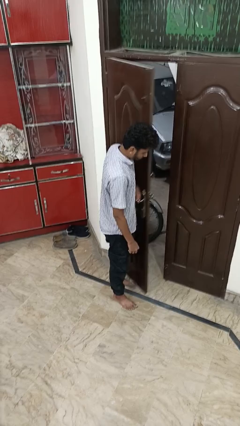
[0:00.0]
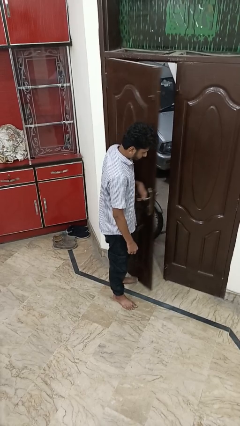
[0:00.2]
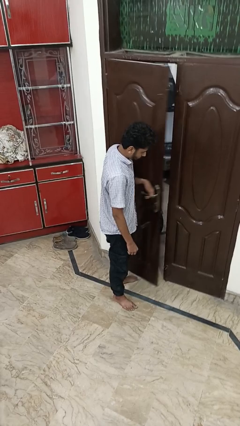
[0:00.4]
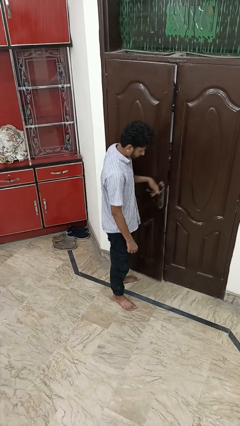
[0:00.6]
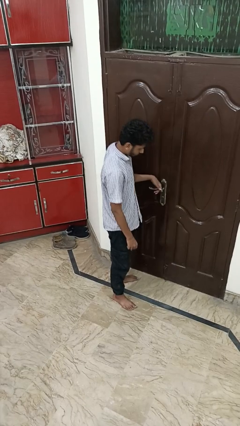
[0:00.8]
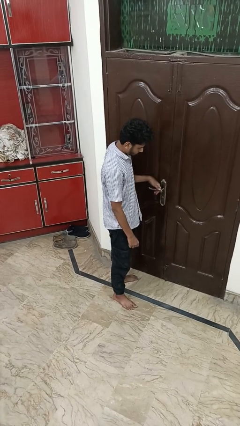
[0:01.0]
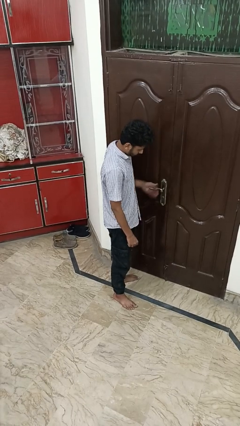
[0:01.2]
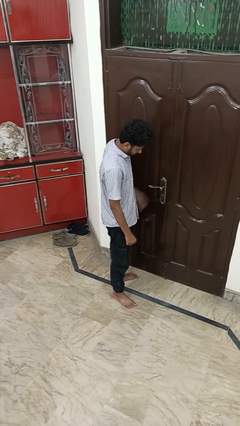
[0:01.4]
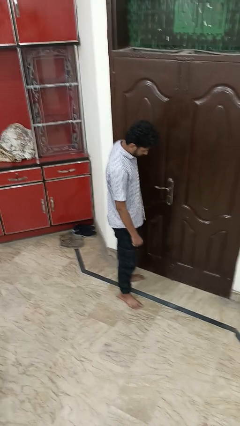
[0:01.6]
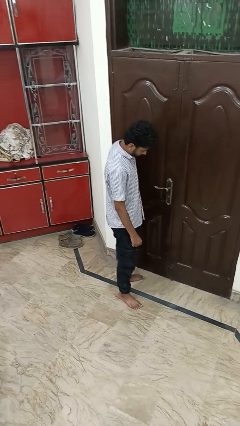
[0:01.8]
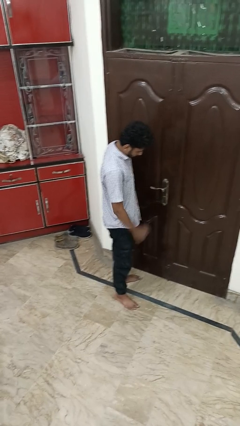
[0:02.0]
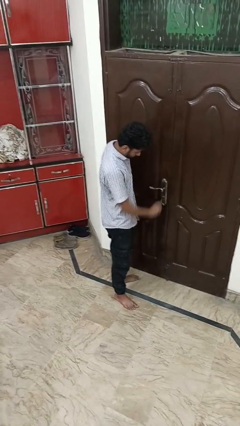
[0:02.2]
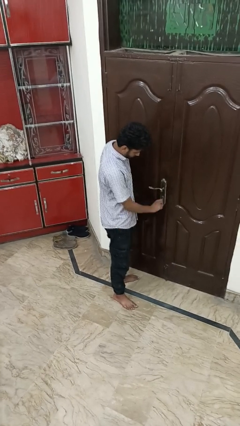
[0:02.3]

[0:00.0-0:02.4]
person closes facility door

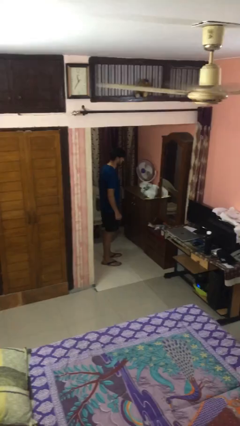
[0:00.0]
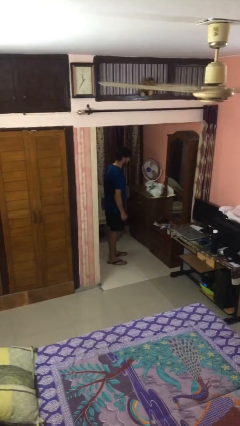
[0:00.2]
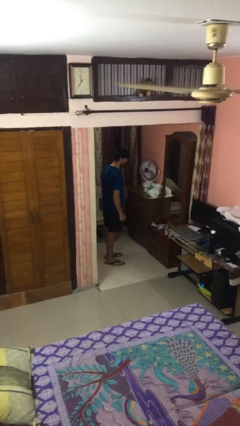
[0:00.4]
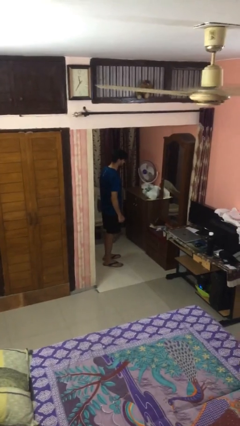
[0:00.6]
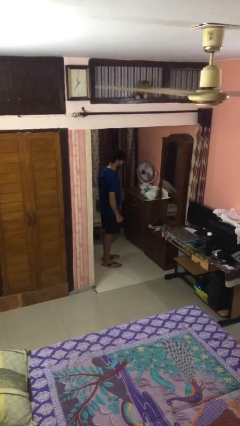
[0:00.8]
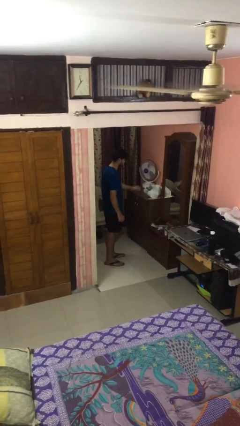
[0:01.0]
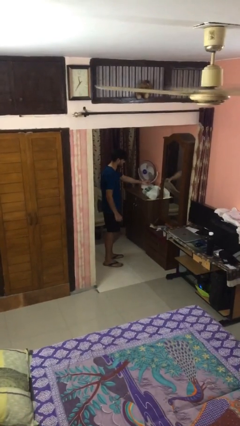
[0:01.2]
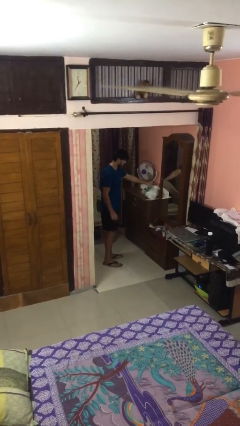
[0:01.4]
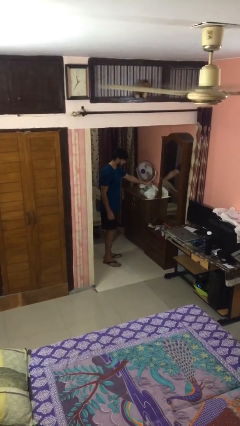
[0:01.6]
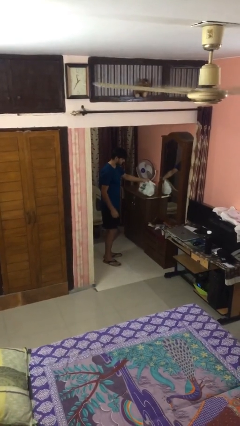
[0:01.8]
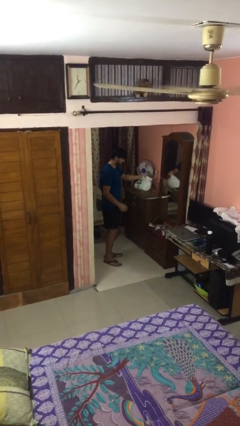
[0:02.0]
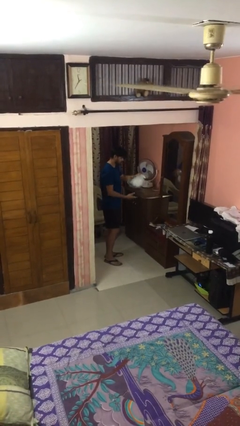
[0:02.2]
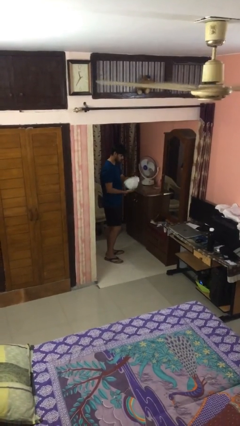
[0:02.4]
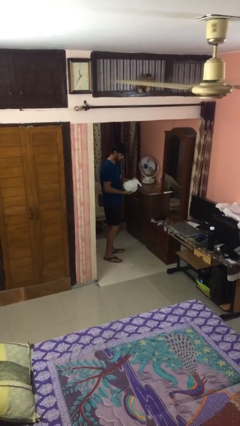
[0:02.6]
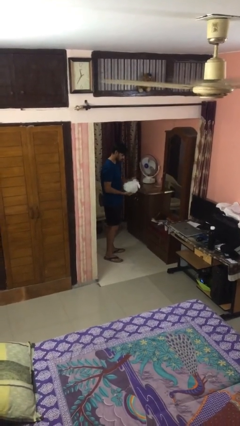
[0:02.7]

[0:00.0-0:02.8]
person picks up object from countertop

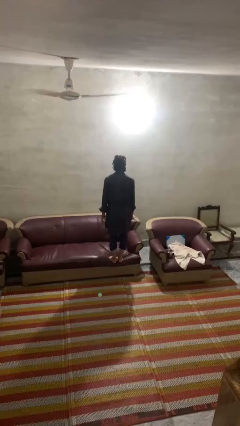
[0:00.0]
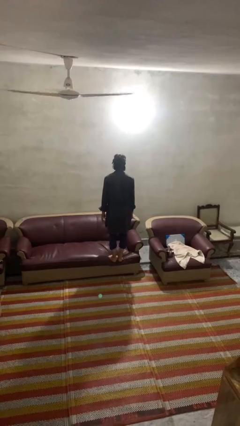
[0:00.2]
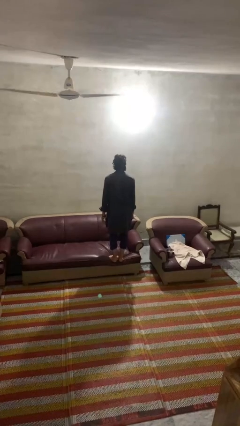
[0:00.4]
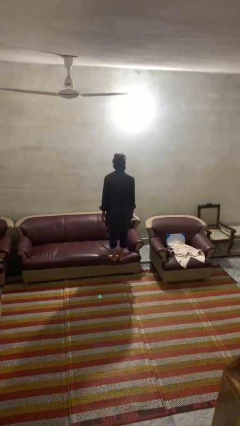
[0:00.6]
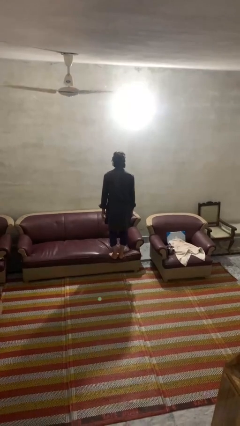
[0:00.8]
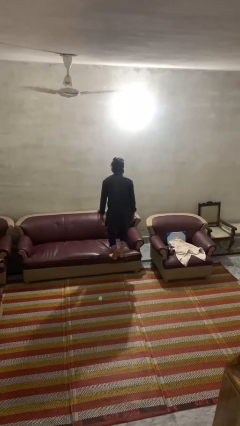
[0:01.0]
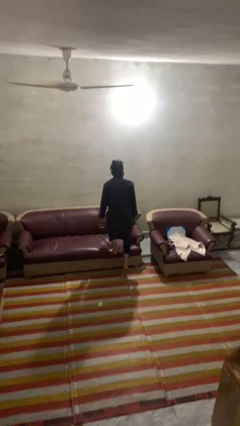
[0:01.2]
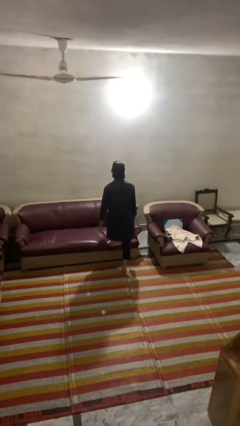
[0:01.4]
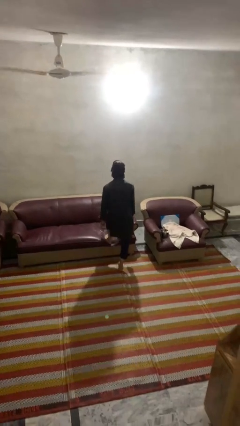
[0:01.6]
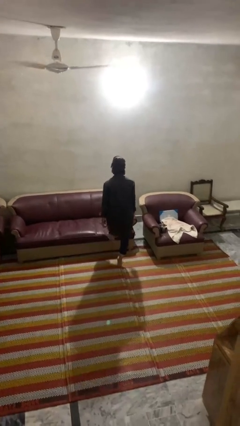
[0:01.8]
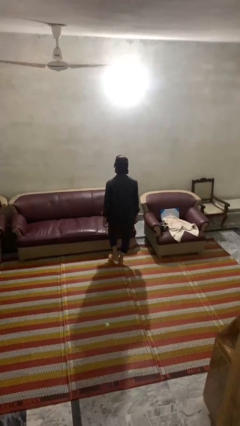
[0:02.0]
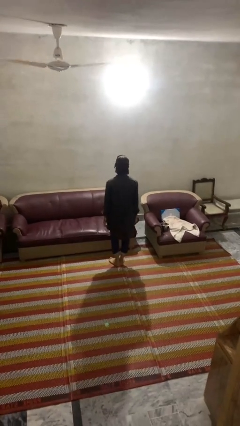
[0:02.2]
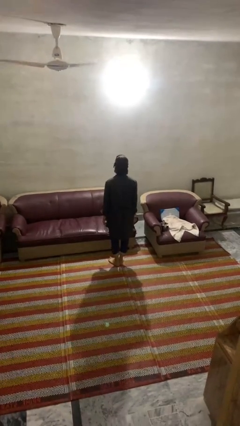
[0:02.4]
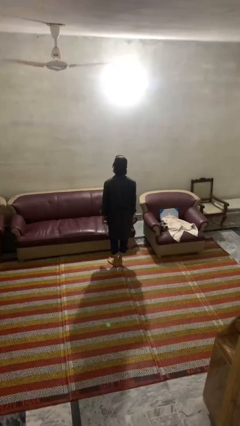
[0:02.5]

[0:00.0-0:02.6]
person climbs off couch

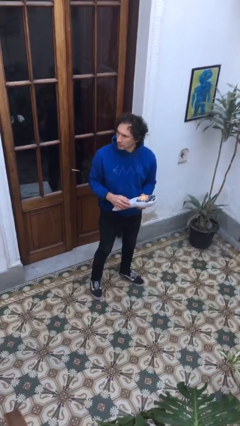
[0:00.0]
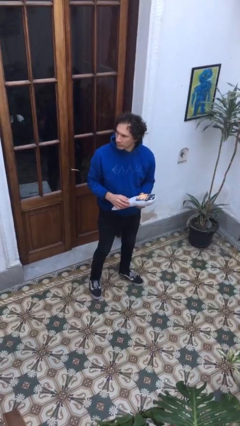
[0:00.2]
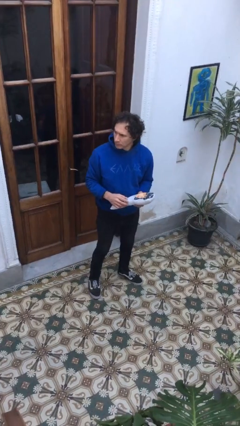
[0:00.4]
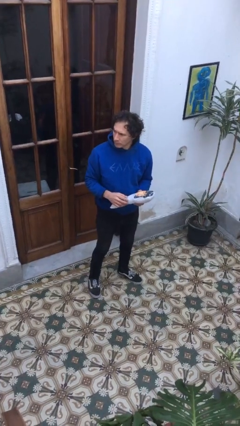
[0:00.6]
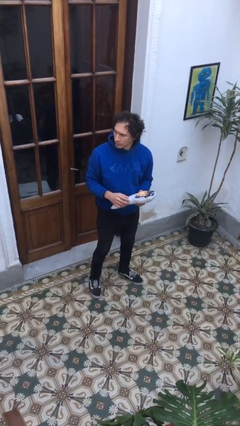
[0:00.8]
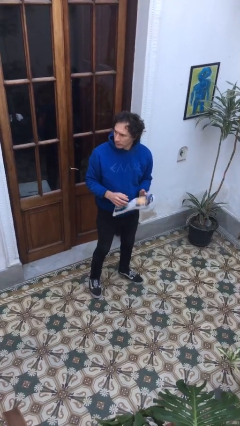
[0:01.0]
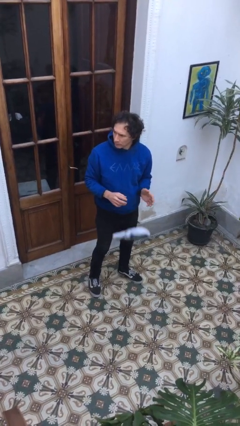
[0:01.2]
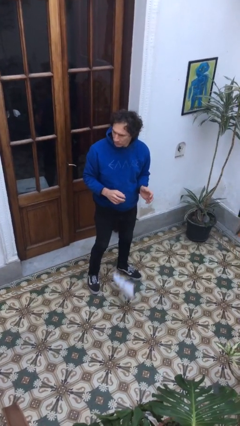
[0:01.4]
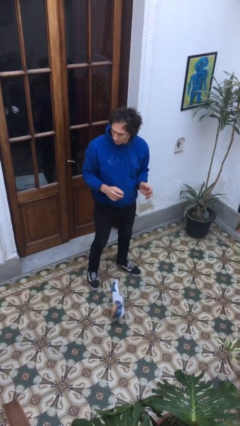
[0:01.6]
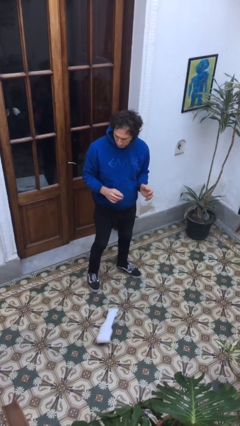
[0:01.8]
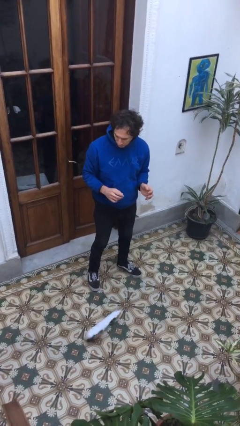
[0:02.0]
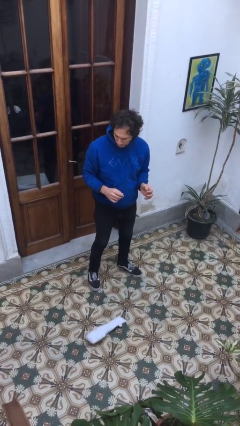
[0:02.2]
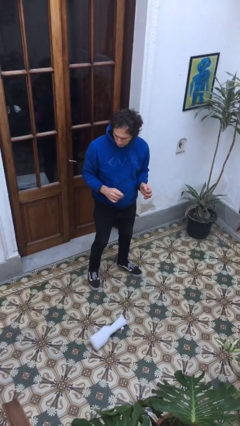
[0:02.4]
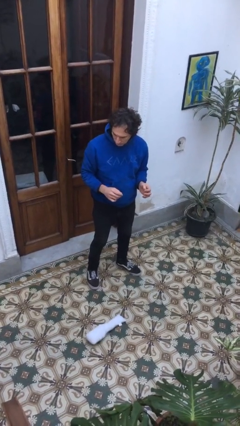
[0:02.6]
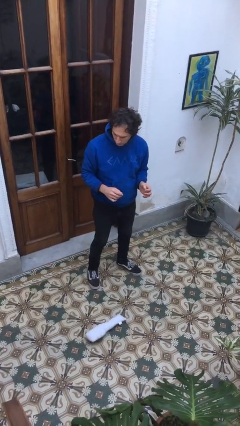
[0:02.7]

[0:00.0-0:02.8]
person drops object

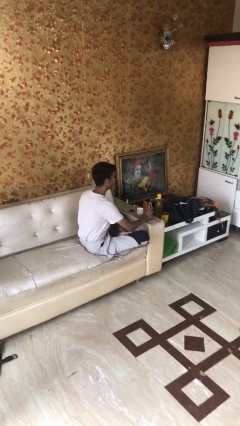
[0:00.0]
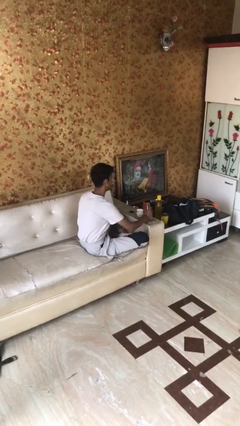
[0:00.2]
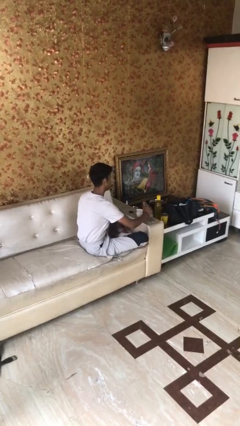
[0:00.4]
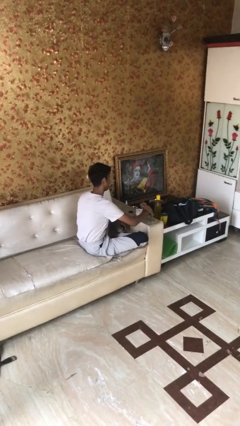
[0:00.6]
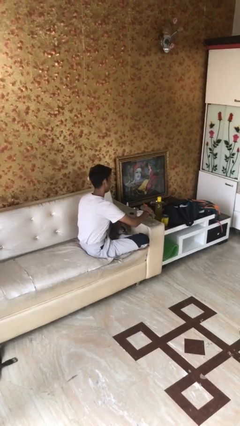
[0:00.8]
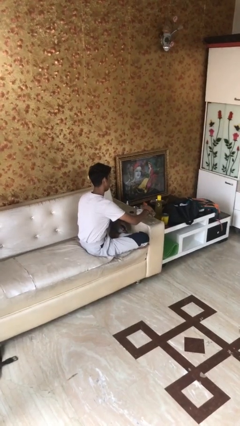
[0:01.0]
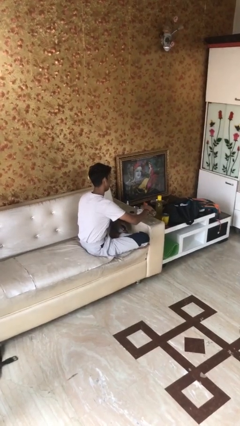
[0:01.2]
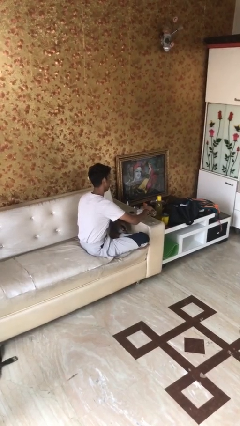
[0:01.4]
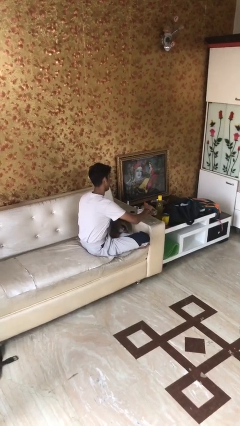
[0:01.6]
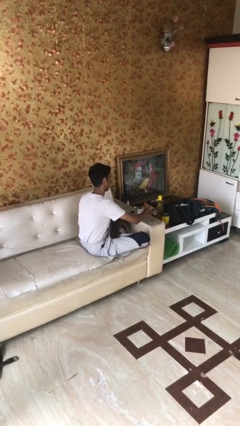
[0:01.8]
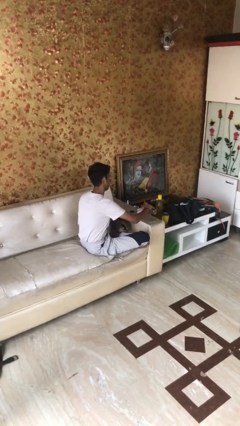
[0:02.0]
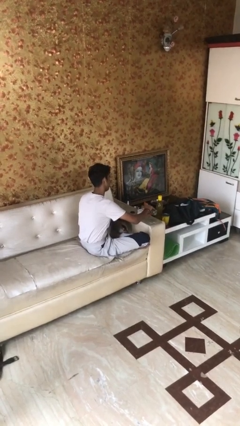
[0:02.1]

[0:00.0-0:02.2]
person pours liquid into cup

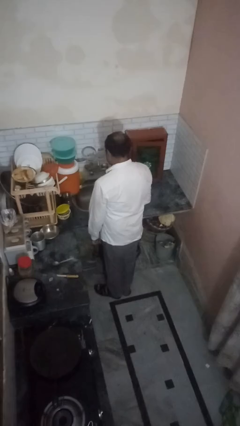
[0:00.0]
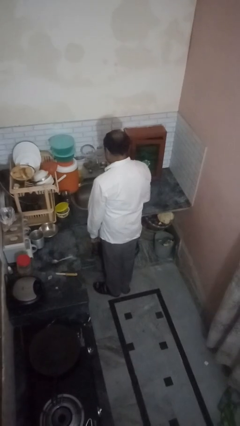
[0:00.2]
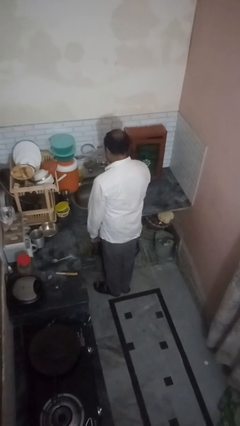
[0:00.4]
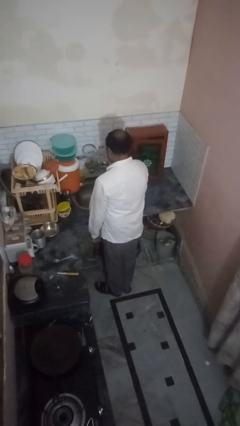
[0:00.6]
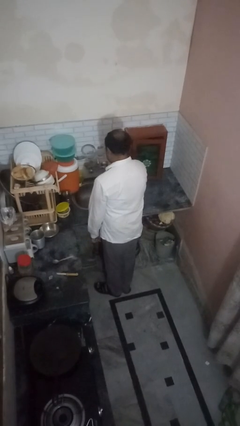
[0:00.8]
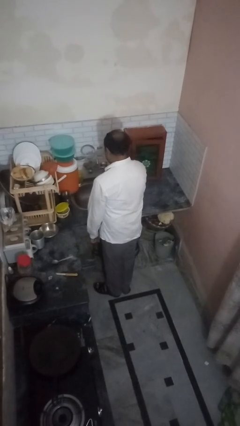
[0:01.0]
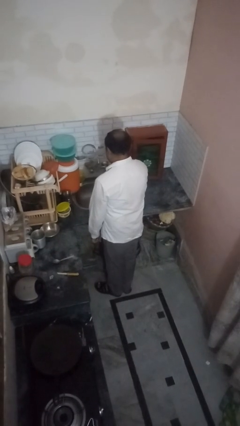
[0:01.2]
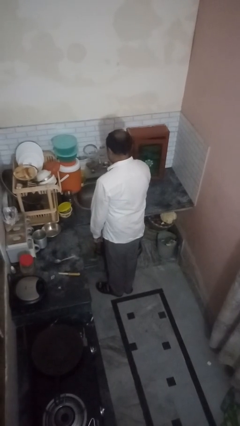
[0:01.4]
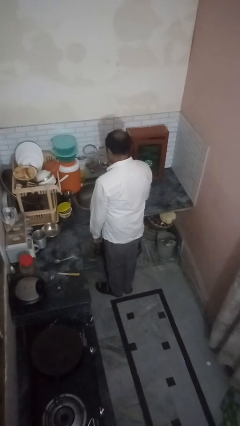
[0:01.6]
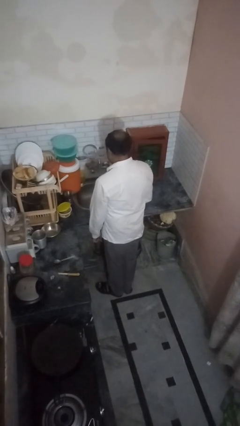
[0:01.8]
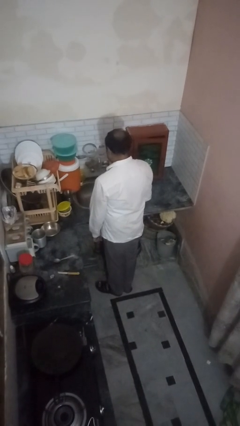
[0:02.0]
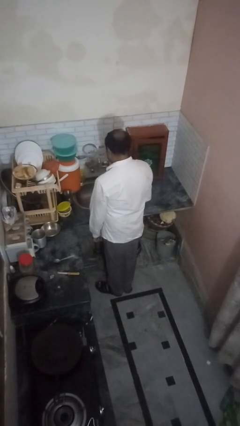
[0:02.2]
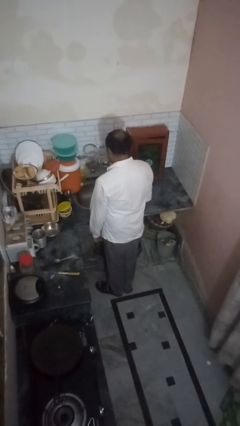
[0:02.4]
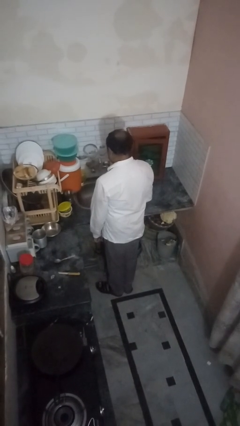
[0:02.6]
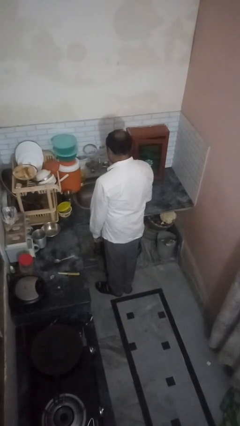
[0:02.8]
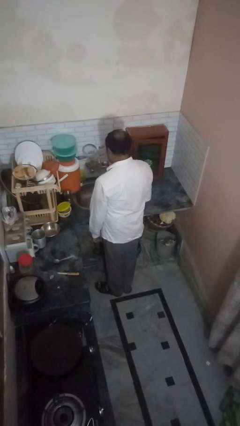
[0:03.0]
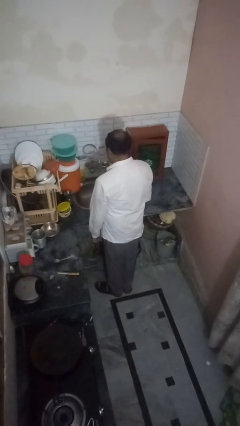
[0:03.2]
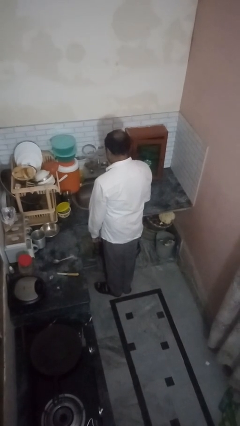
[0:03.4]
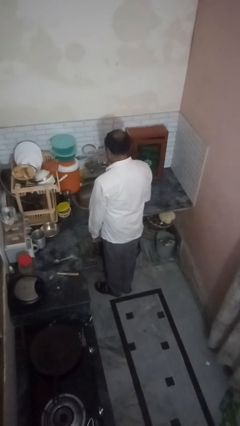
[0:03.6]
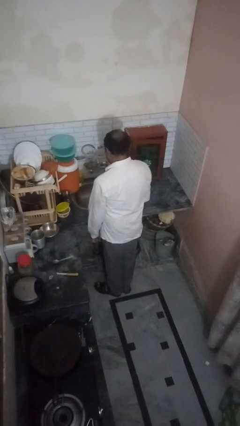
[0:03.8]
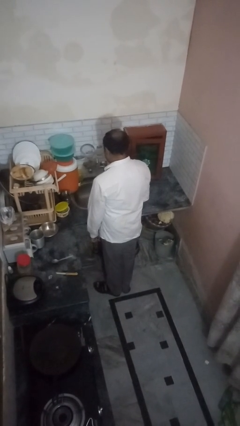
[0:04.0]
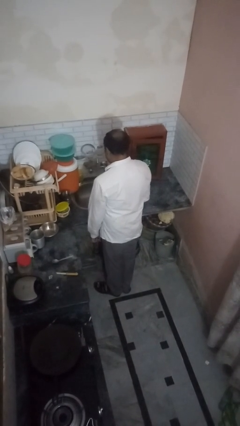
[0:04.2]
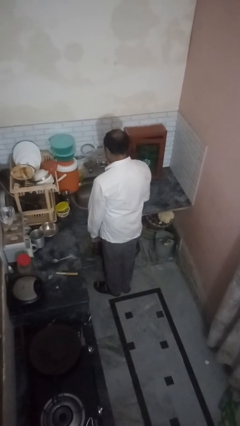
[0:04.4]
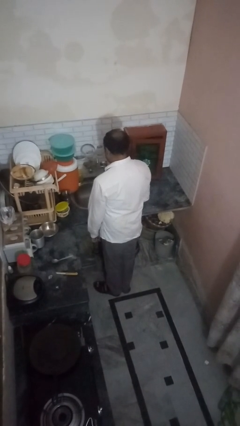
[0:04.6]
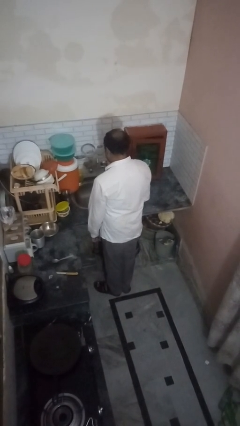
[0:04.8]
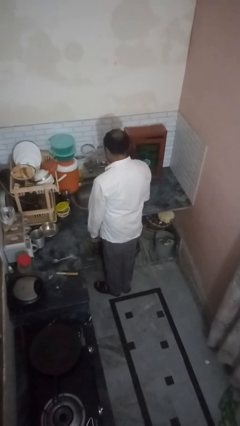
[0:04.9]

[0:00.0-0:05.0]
person turns on faucet
